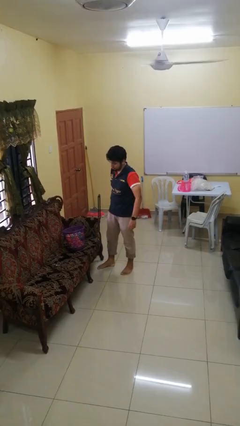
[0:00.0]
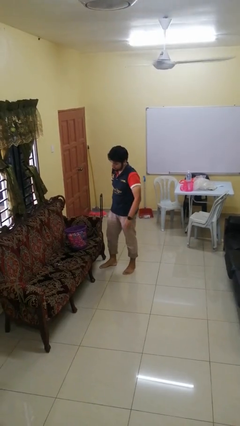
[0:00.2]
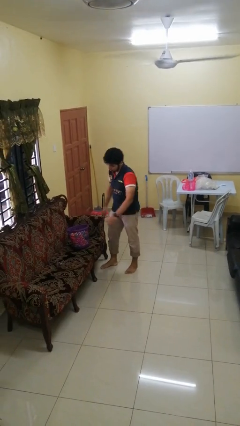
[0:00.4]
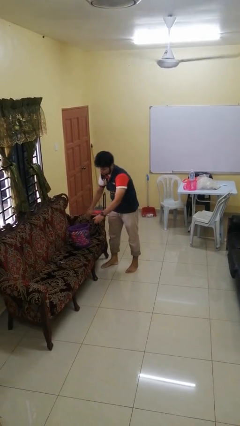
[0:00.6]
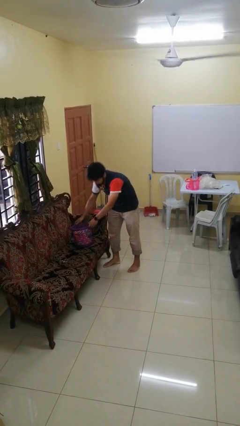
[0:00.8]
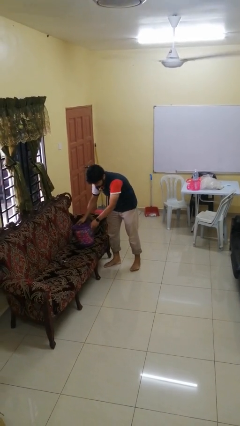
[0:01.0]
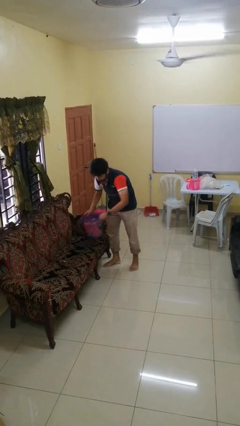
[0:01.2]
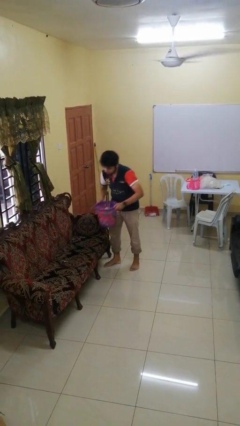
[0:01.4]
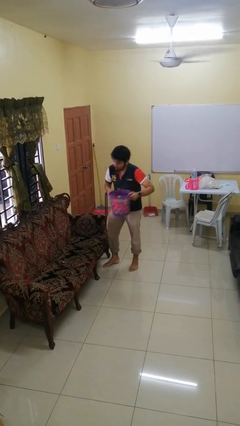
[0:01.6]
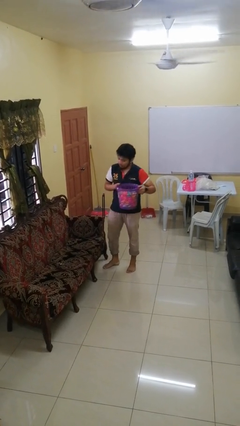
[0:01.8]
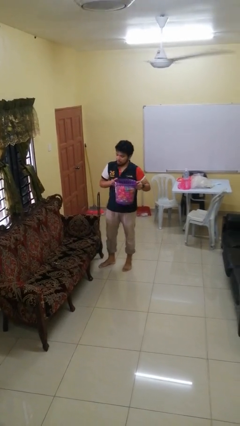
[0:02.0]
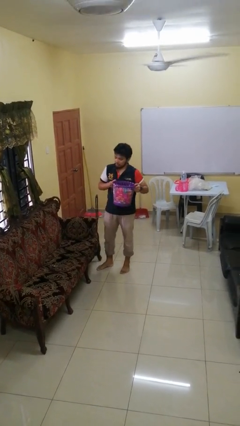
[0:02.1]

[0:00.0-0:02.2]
person picks up object from couch

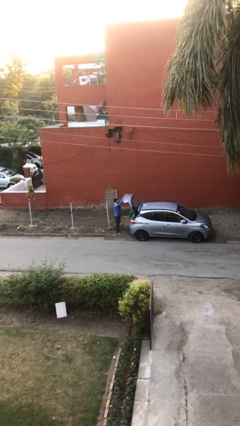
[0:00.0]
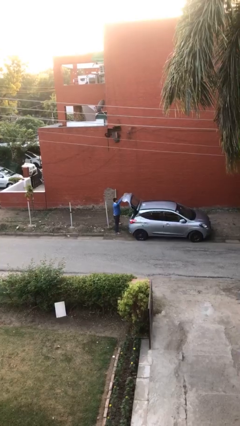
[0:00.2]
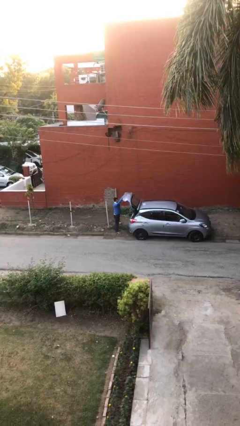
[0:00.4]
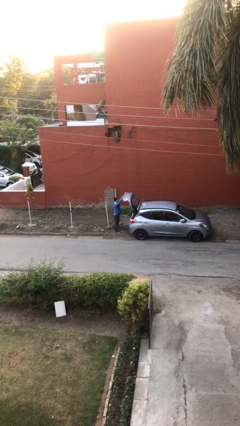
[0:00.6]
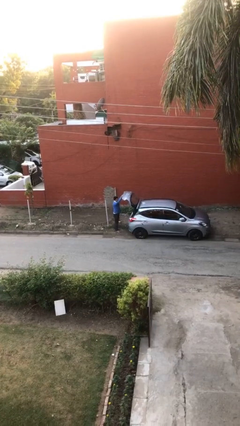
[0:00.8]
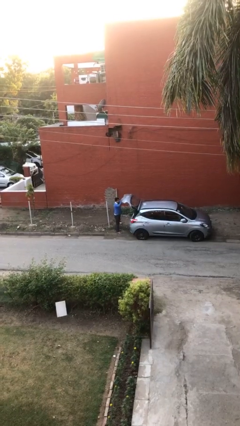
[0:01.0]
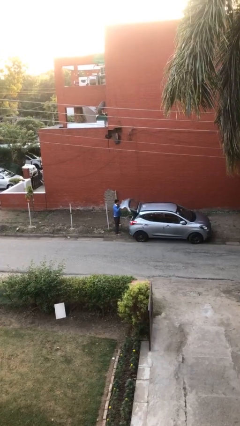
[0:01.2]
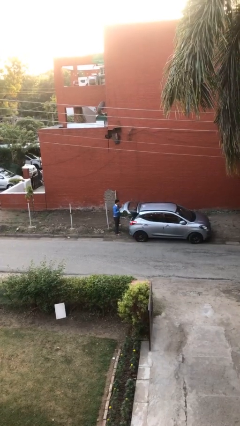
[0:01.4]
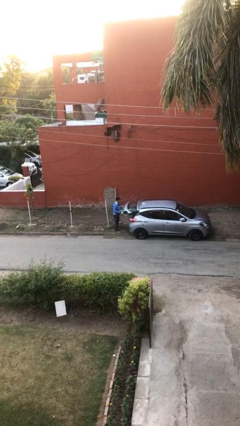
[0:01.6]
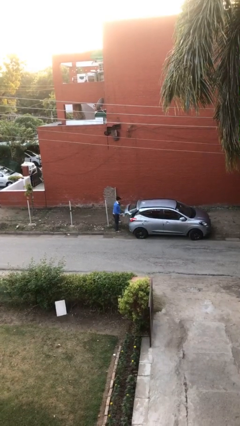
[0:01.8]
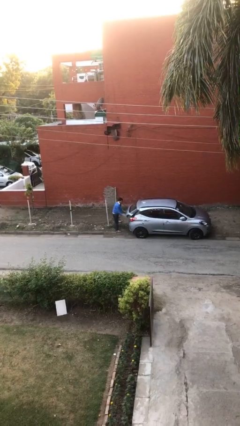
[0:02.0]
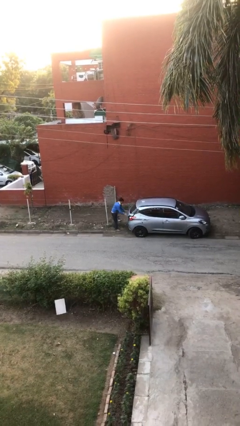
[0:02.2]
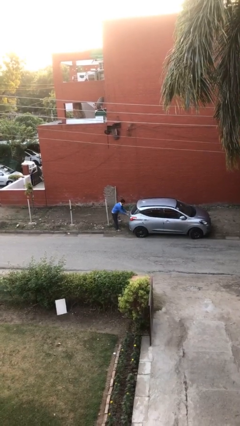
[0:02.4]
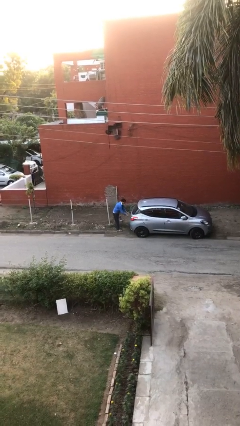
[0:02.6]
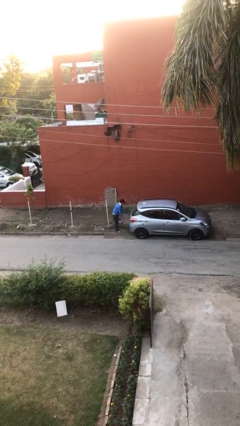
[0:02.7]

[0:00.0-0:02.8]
person closes car trunk

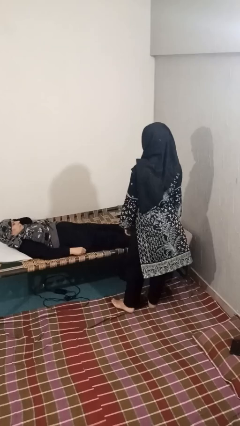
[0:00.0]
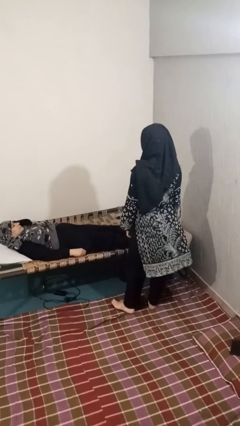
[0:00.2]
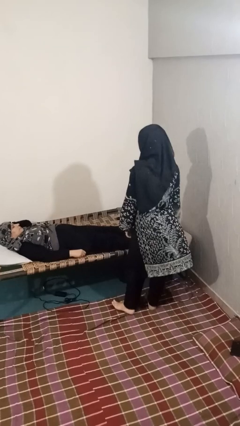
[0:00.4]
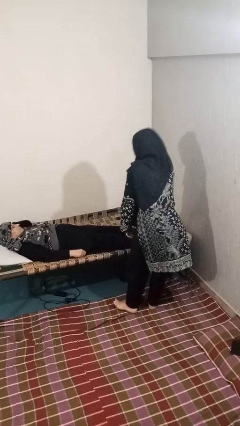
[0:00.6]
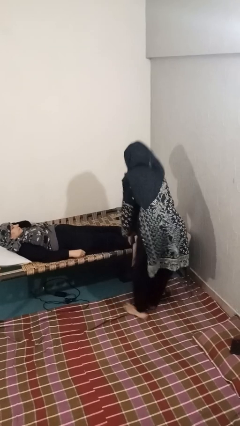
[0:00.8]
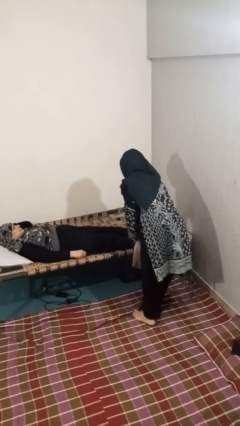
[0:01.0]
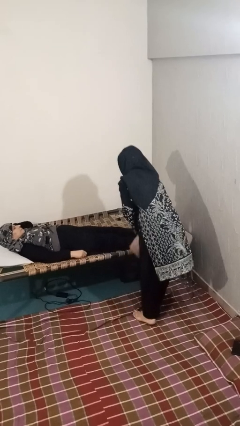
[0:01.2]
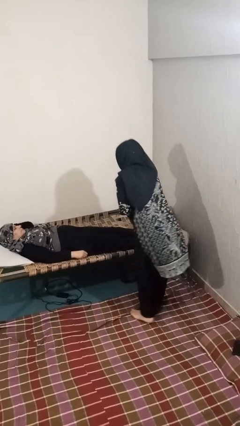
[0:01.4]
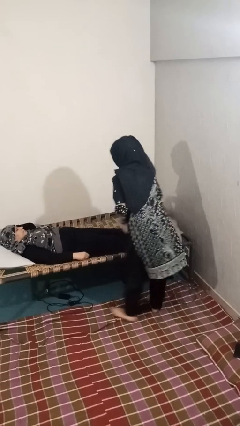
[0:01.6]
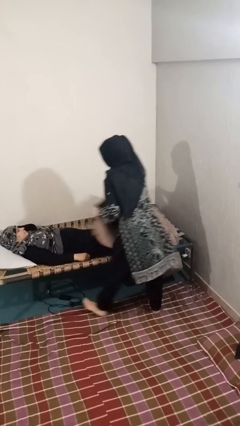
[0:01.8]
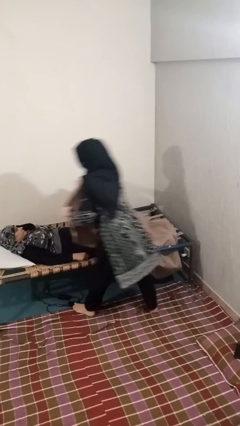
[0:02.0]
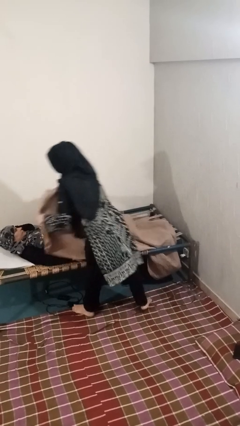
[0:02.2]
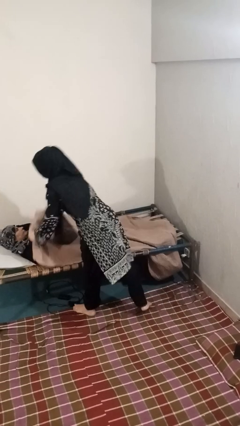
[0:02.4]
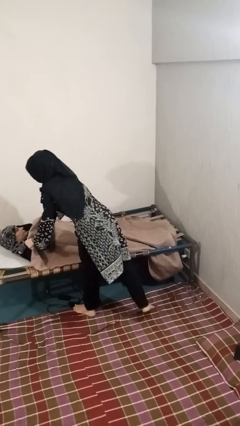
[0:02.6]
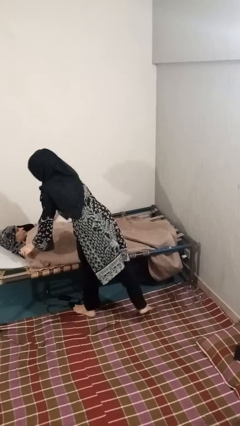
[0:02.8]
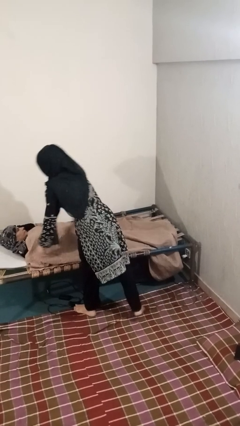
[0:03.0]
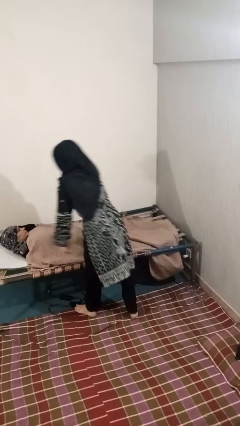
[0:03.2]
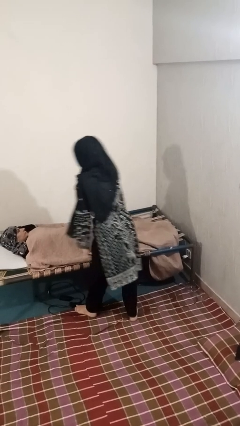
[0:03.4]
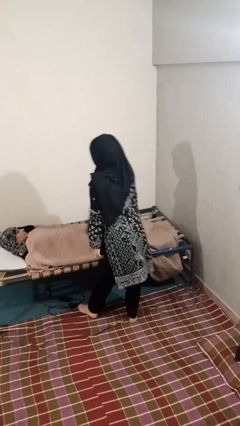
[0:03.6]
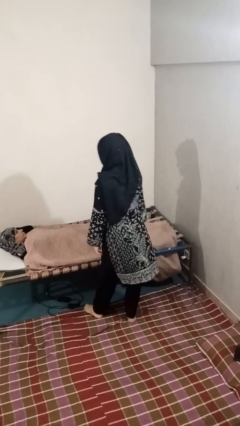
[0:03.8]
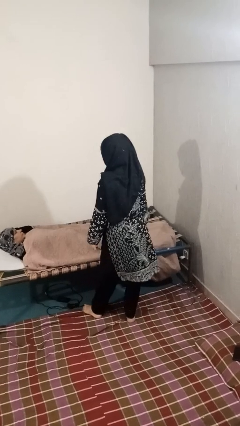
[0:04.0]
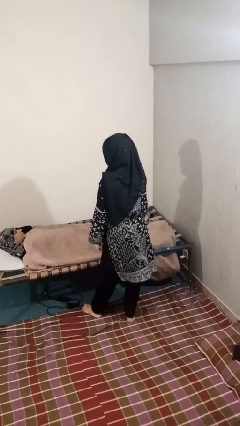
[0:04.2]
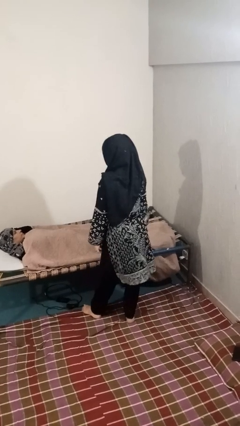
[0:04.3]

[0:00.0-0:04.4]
person covers friend with blanket

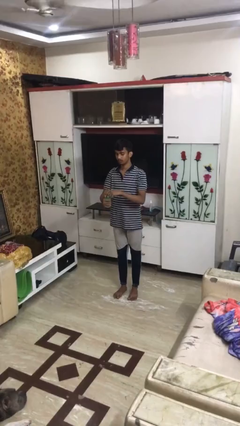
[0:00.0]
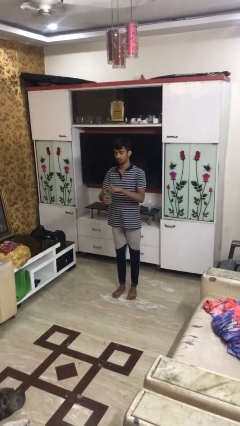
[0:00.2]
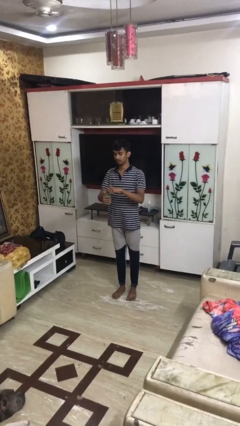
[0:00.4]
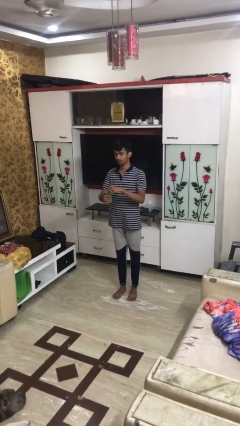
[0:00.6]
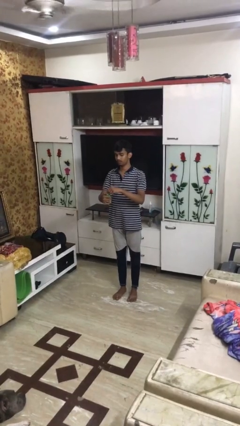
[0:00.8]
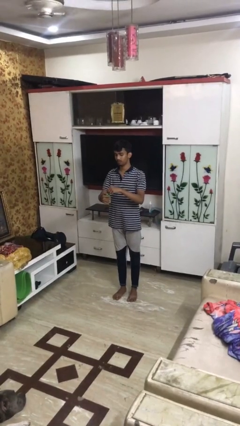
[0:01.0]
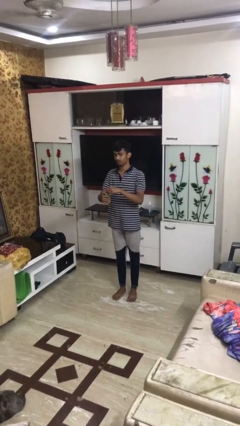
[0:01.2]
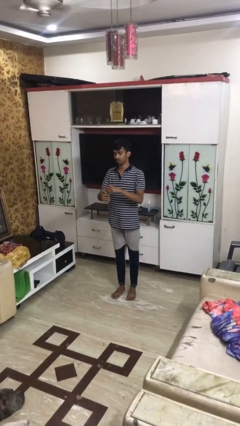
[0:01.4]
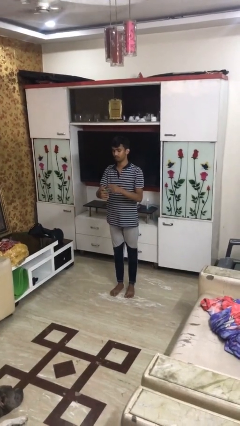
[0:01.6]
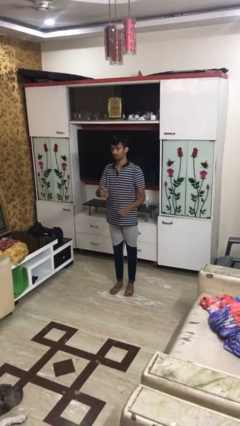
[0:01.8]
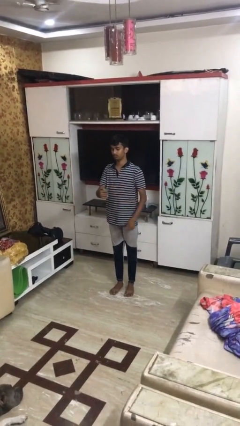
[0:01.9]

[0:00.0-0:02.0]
person opens beverage can

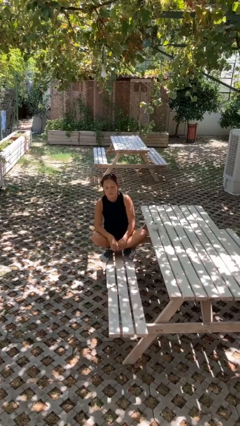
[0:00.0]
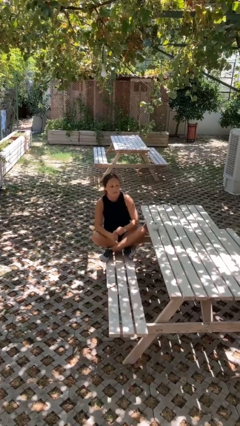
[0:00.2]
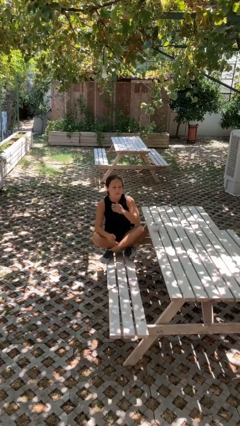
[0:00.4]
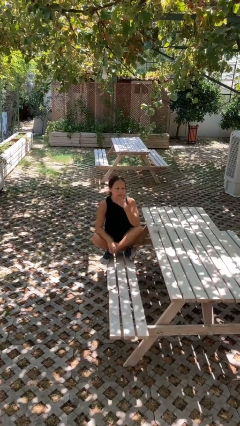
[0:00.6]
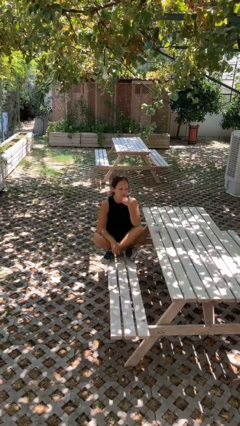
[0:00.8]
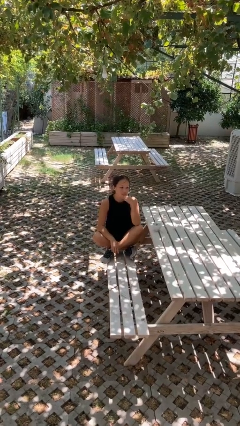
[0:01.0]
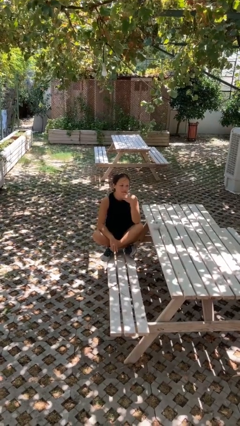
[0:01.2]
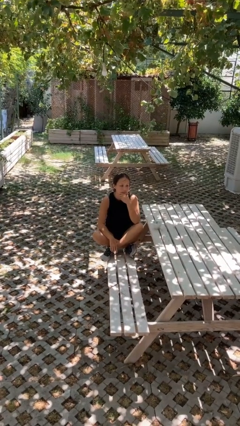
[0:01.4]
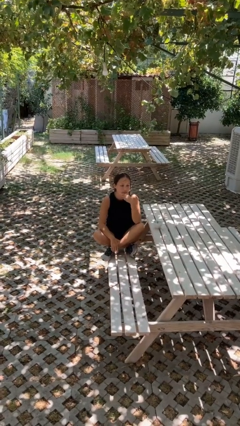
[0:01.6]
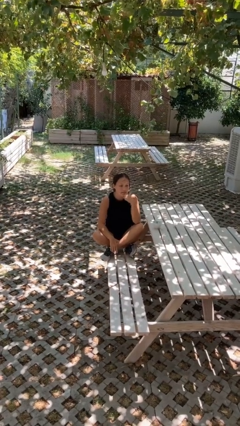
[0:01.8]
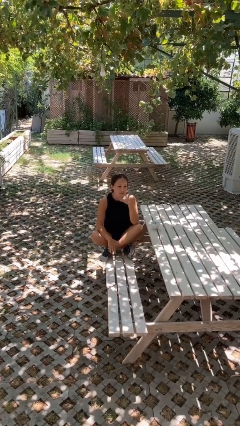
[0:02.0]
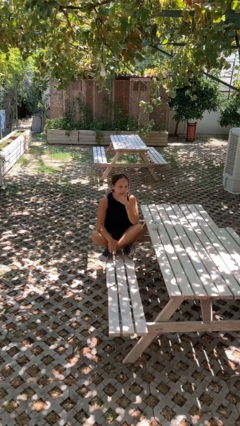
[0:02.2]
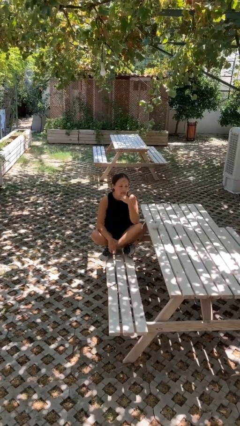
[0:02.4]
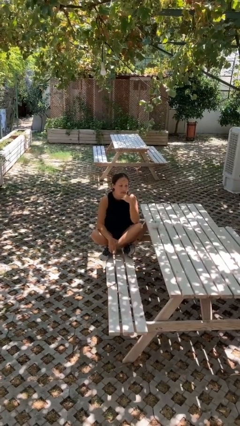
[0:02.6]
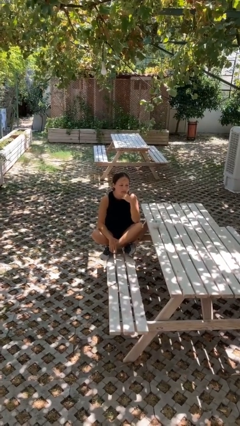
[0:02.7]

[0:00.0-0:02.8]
person strokes chin

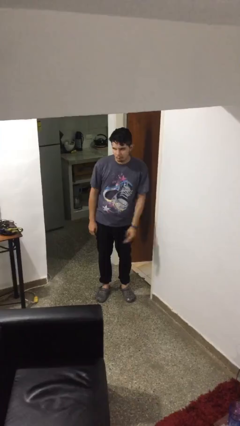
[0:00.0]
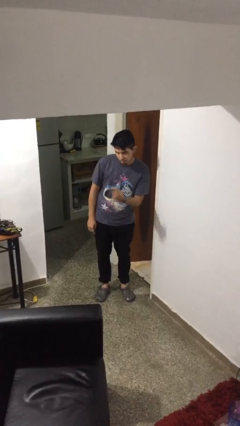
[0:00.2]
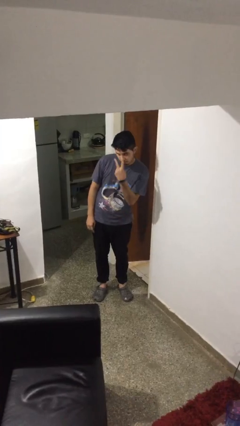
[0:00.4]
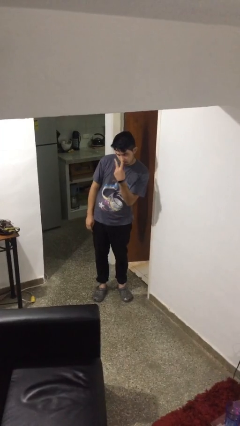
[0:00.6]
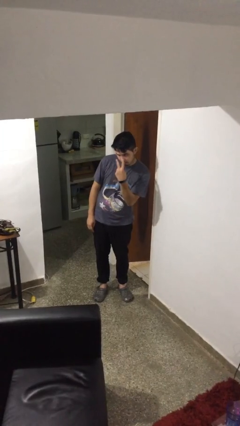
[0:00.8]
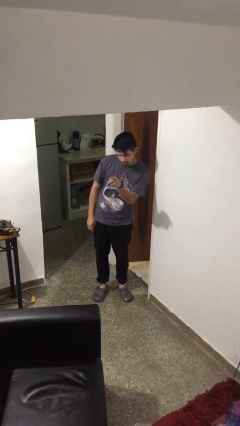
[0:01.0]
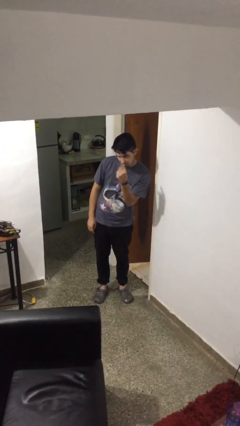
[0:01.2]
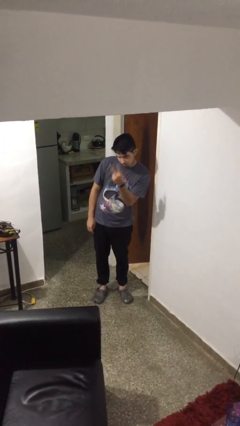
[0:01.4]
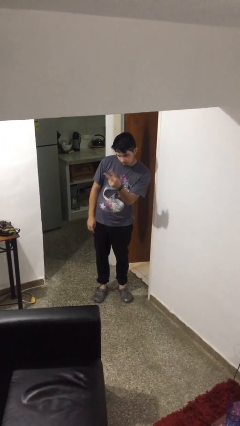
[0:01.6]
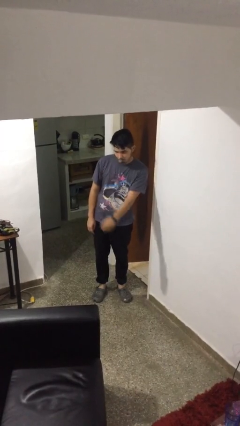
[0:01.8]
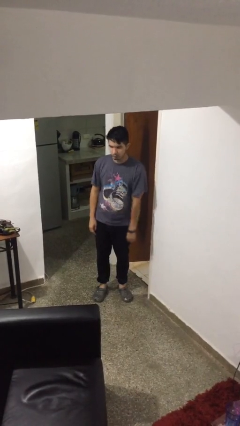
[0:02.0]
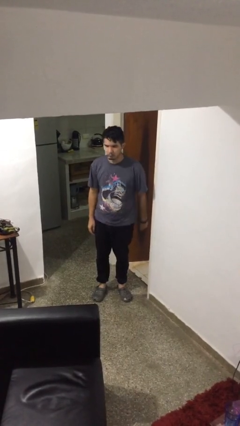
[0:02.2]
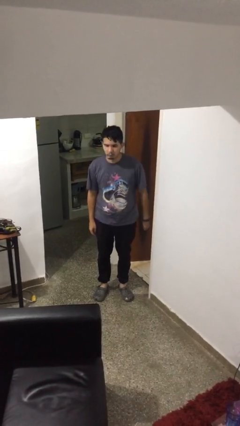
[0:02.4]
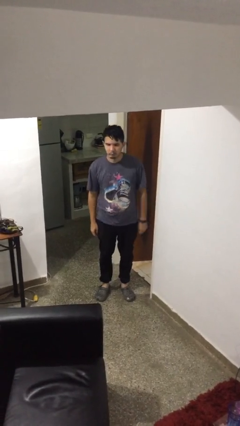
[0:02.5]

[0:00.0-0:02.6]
person gestures watch closely

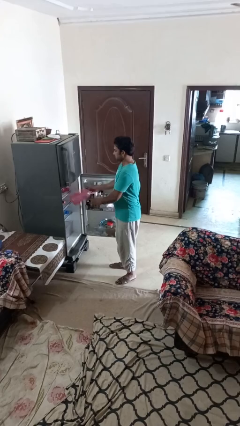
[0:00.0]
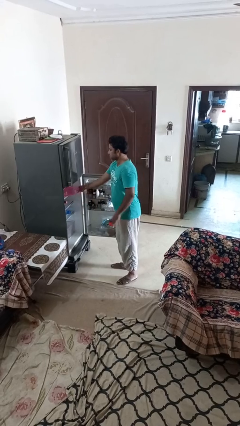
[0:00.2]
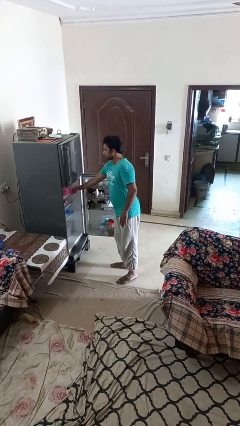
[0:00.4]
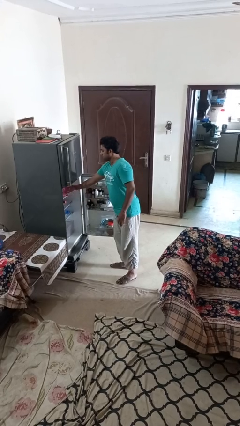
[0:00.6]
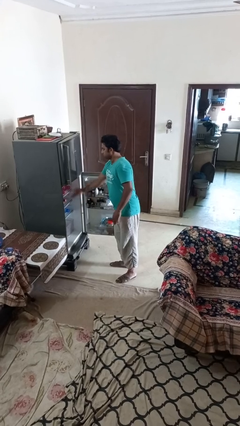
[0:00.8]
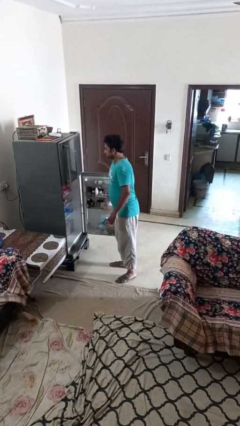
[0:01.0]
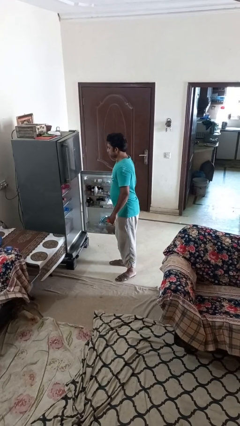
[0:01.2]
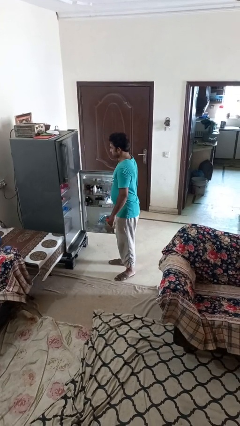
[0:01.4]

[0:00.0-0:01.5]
person puts object into refrigerator
